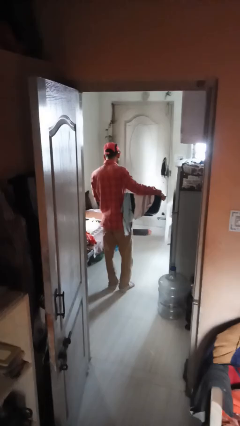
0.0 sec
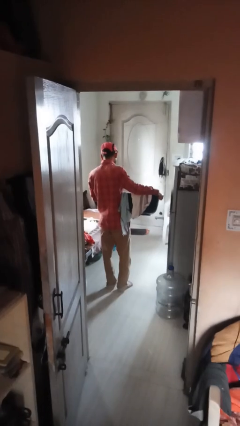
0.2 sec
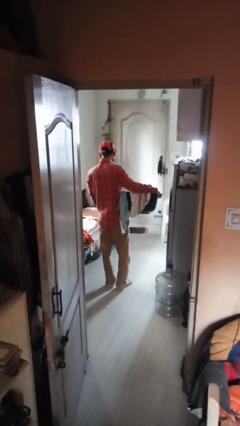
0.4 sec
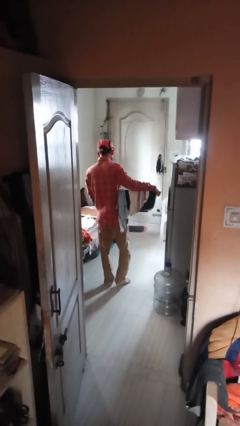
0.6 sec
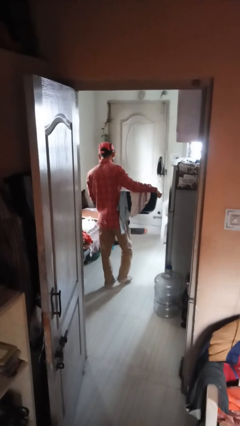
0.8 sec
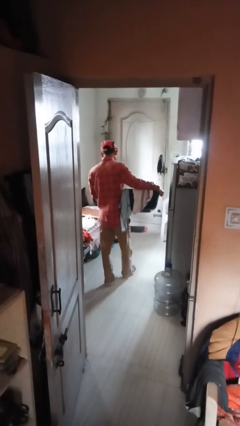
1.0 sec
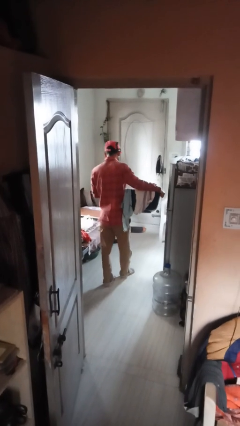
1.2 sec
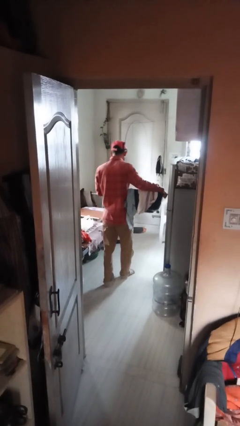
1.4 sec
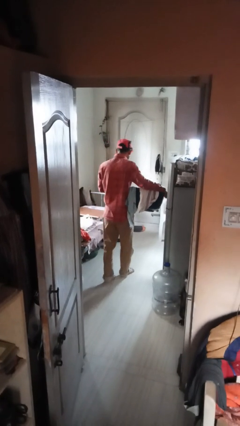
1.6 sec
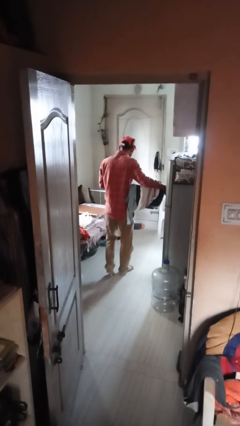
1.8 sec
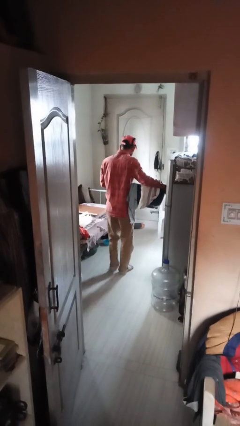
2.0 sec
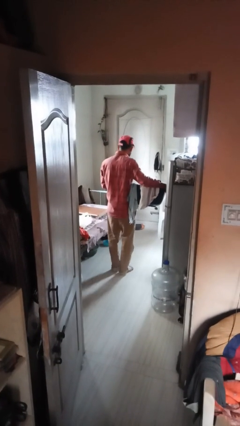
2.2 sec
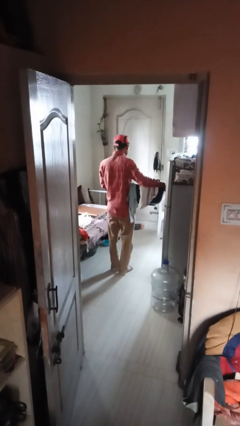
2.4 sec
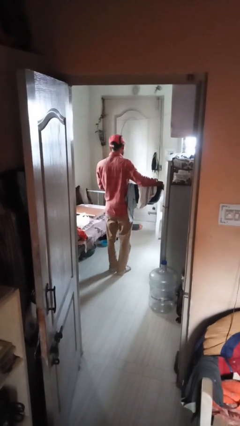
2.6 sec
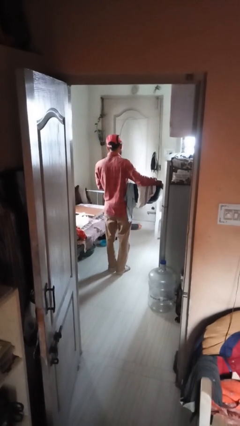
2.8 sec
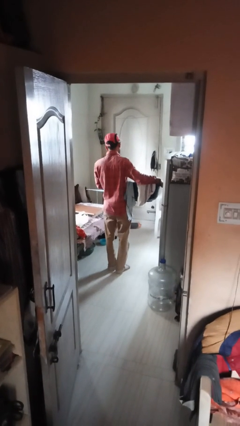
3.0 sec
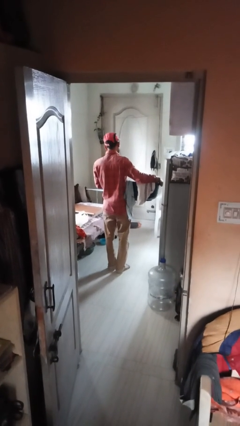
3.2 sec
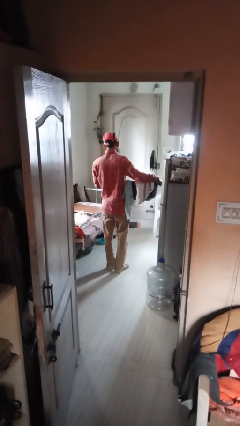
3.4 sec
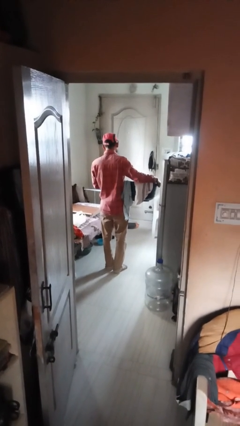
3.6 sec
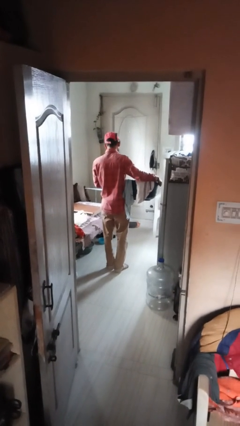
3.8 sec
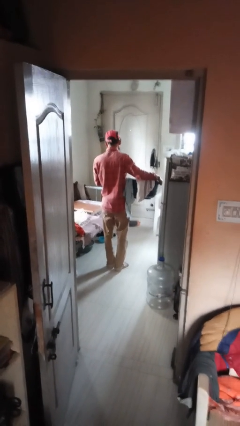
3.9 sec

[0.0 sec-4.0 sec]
person carries laundry basket

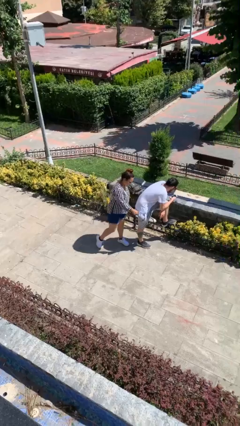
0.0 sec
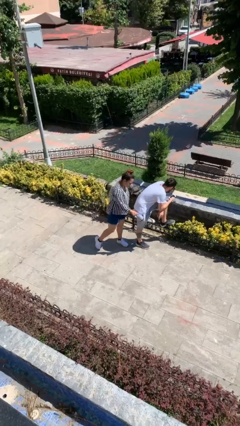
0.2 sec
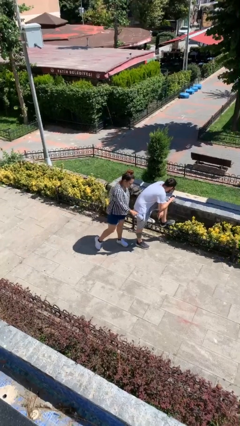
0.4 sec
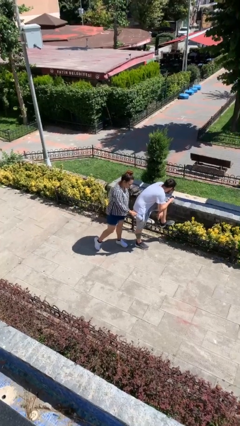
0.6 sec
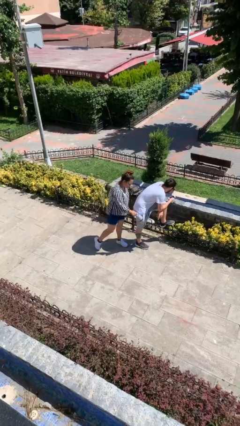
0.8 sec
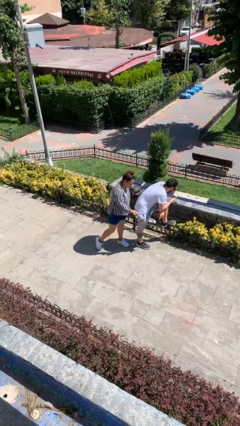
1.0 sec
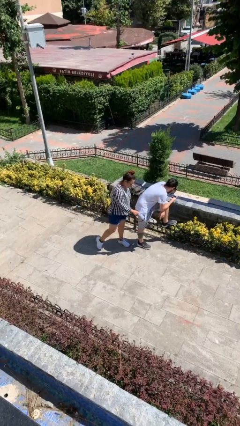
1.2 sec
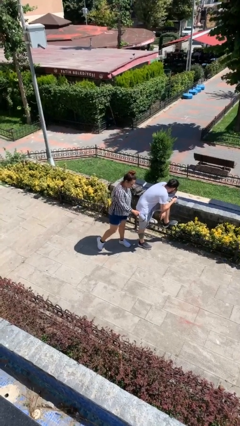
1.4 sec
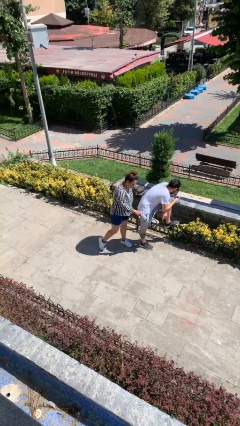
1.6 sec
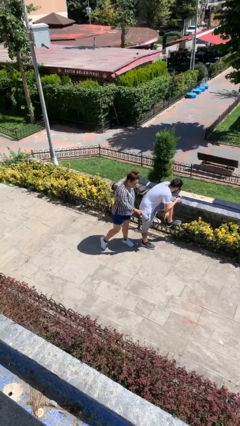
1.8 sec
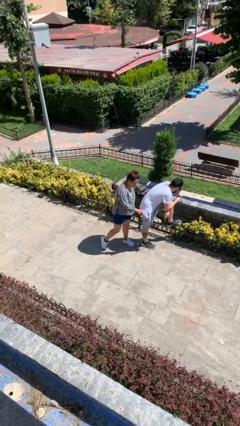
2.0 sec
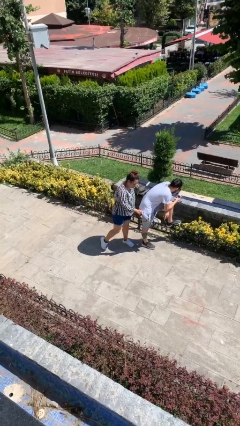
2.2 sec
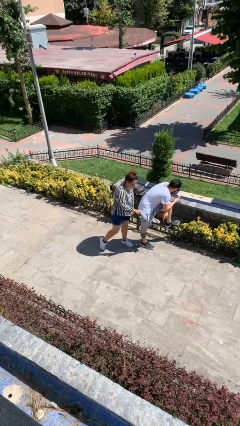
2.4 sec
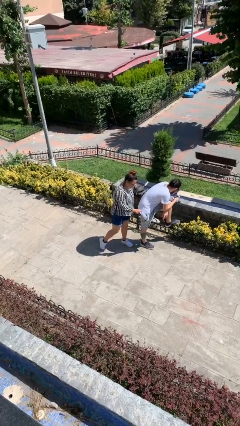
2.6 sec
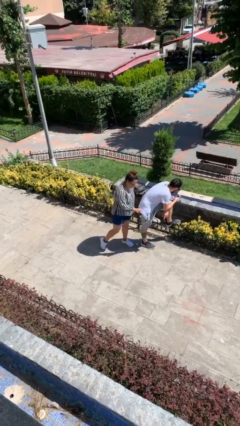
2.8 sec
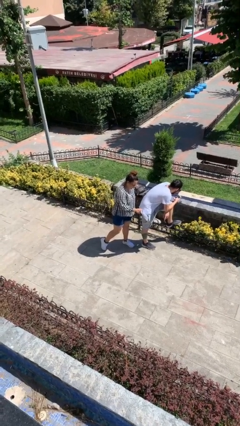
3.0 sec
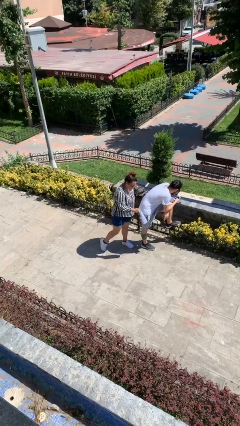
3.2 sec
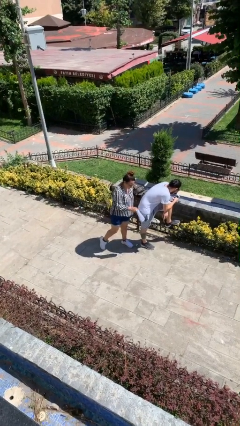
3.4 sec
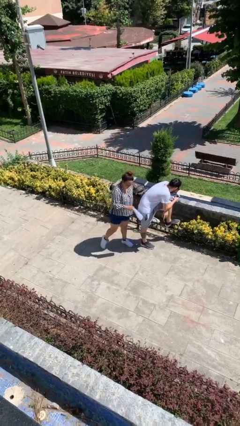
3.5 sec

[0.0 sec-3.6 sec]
person steals object from person

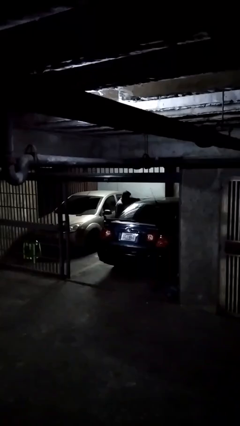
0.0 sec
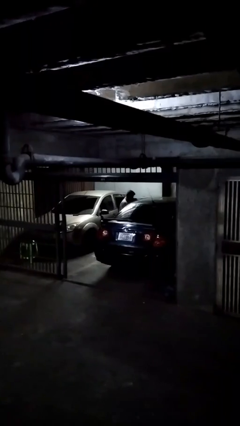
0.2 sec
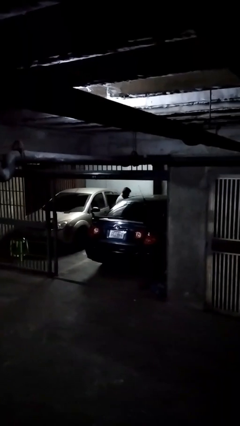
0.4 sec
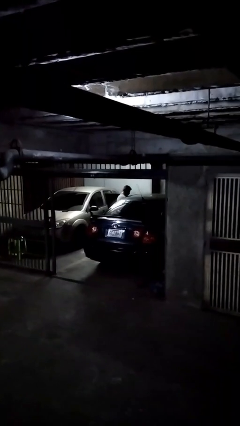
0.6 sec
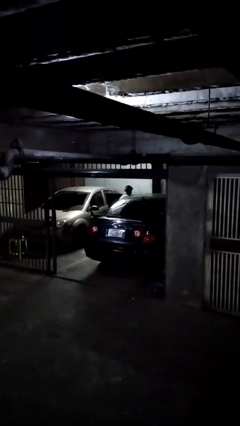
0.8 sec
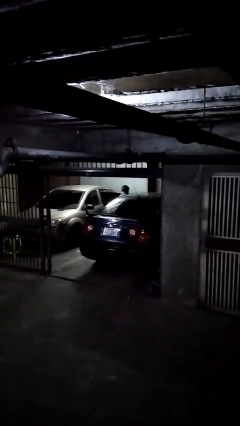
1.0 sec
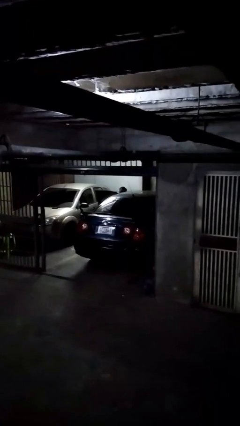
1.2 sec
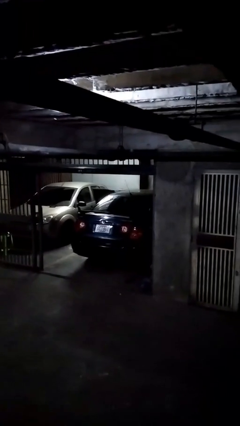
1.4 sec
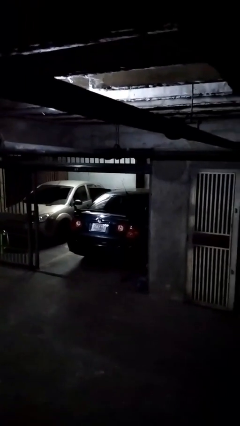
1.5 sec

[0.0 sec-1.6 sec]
person enters car

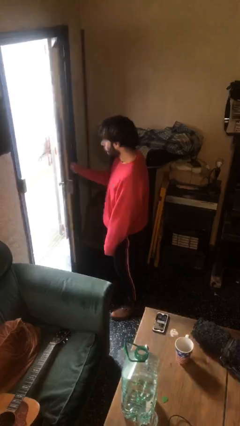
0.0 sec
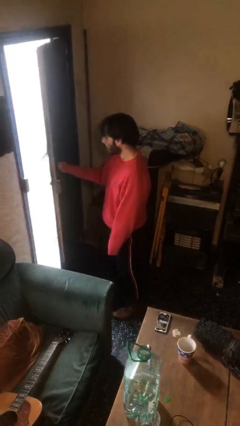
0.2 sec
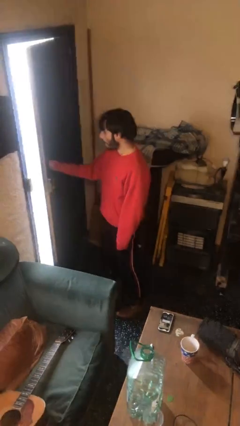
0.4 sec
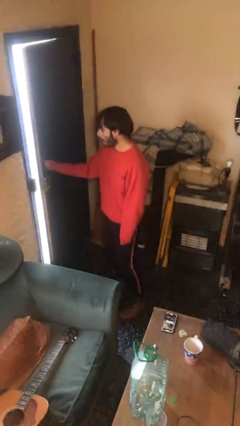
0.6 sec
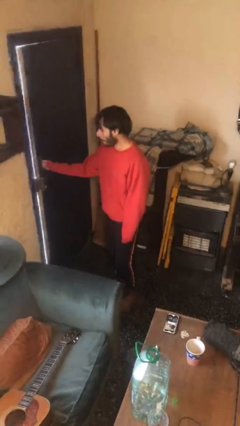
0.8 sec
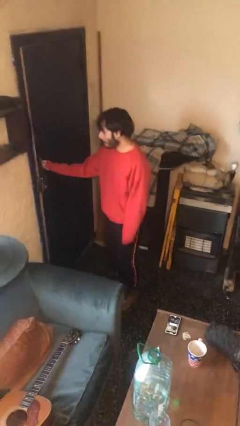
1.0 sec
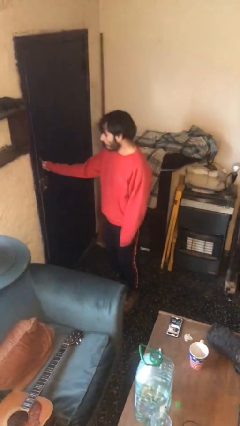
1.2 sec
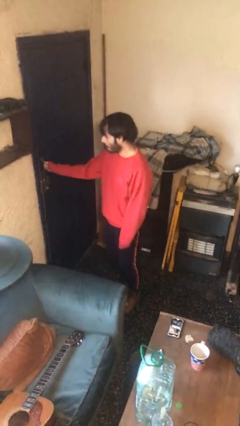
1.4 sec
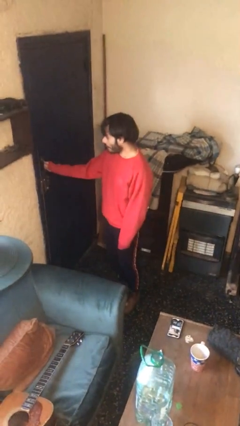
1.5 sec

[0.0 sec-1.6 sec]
person closes facility door

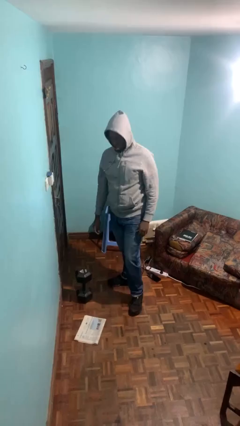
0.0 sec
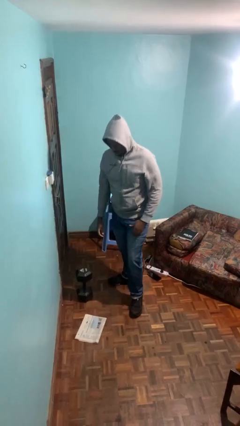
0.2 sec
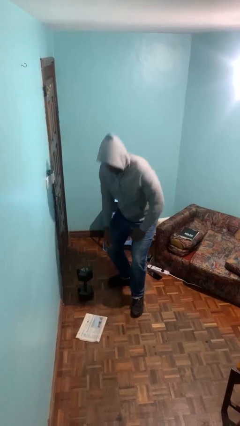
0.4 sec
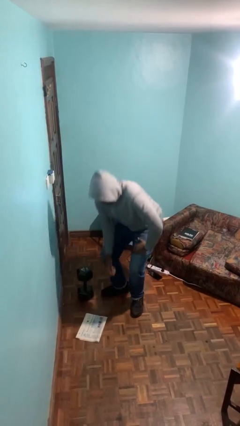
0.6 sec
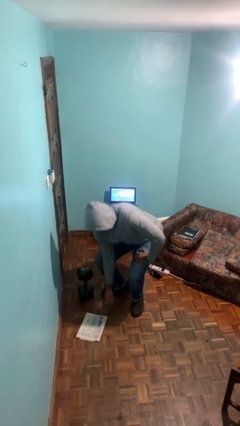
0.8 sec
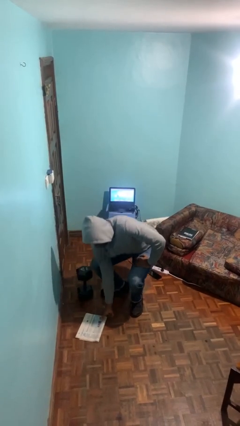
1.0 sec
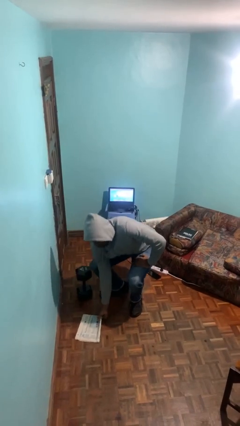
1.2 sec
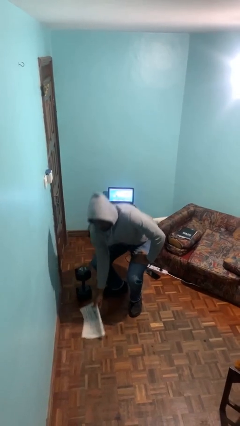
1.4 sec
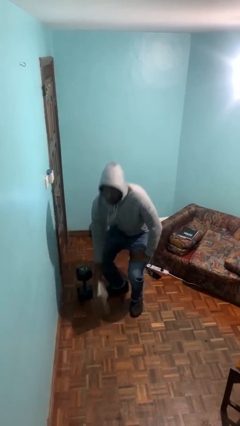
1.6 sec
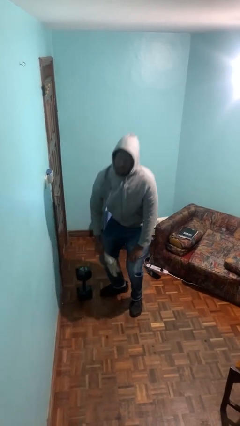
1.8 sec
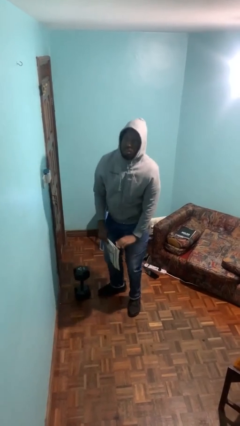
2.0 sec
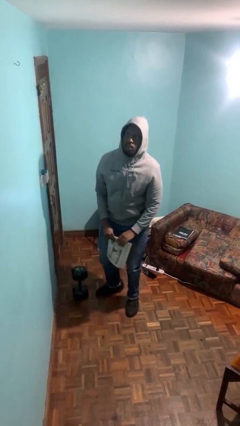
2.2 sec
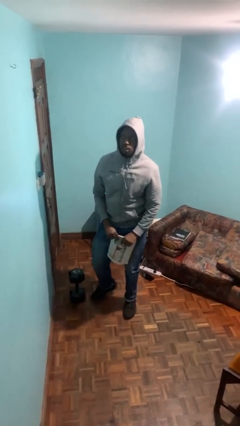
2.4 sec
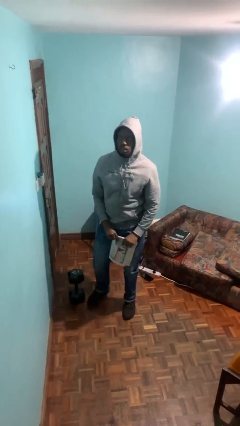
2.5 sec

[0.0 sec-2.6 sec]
person picks up object from floor

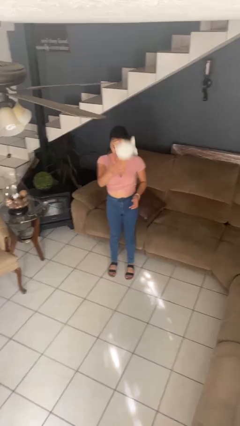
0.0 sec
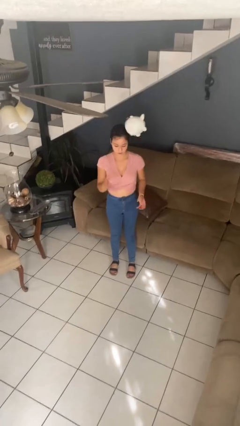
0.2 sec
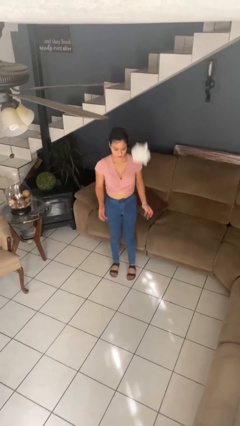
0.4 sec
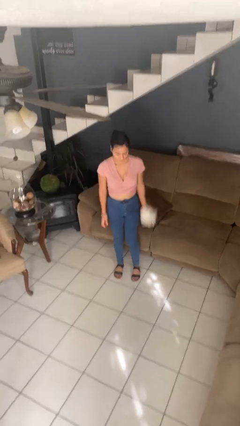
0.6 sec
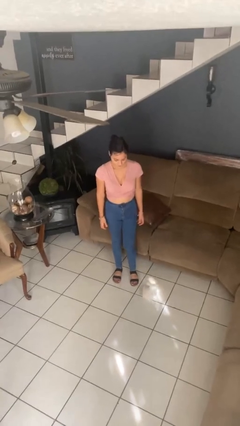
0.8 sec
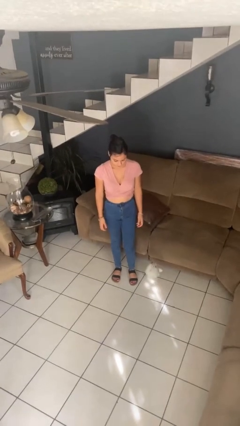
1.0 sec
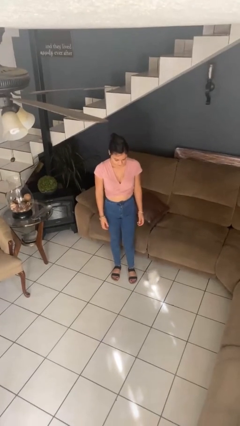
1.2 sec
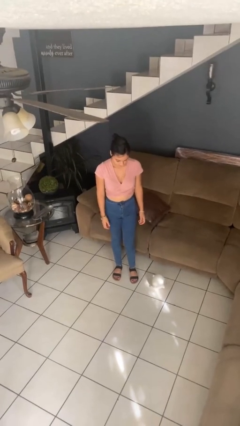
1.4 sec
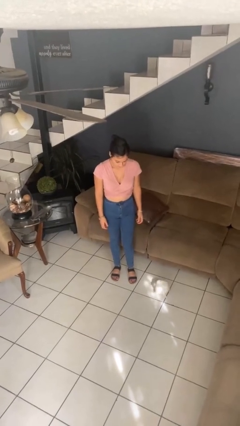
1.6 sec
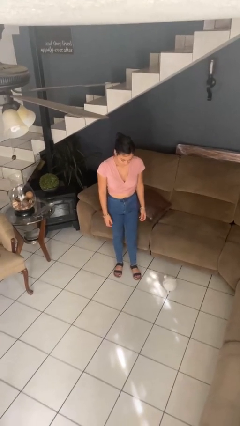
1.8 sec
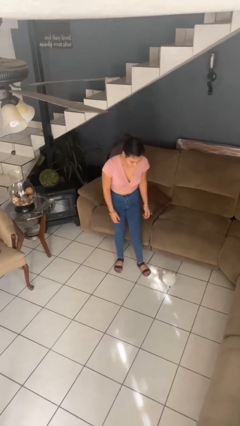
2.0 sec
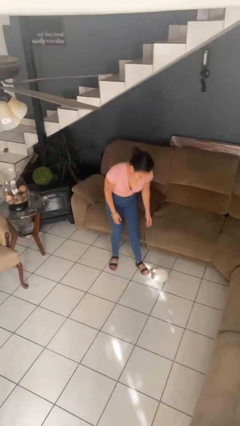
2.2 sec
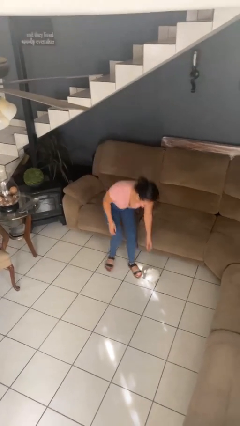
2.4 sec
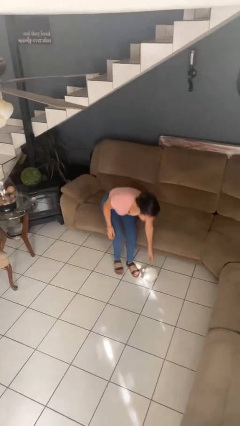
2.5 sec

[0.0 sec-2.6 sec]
person throws object into air

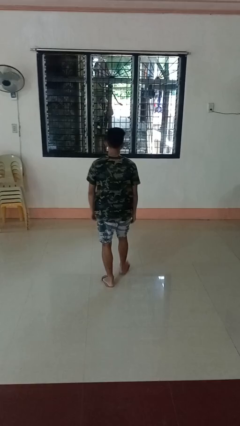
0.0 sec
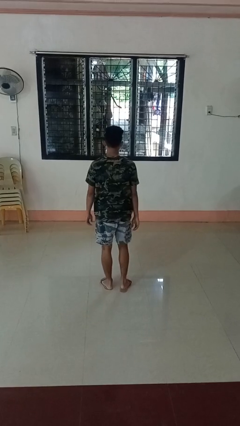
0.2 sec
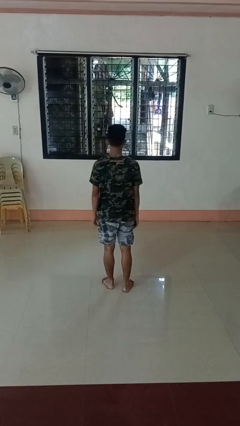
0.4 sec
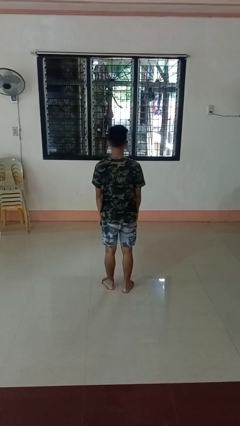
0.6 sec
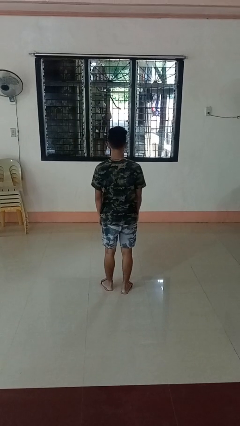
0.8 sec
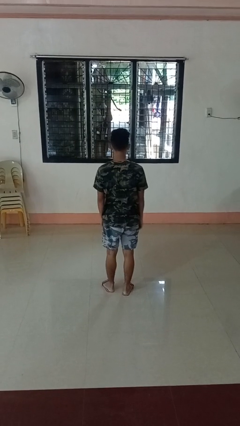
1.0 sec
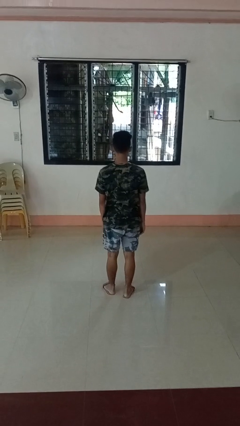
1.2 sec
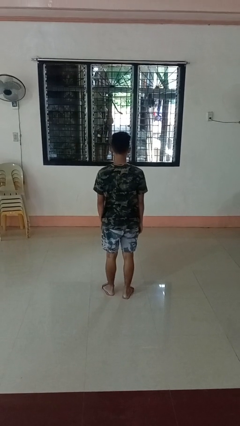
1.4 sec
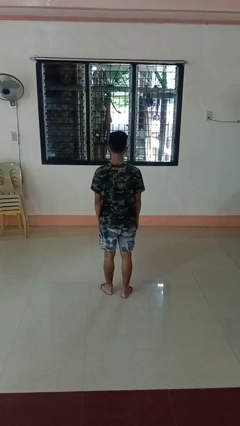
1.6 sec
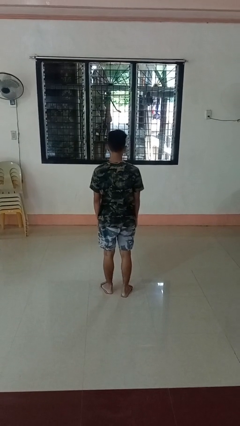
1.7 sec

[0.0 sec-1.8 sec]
person stands up from floor
